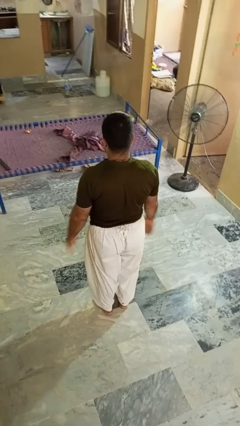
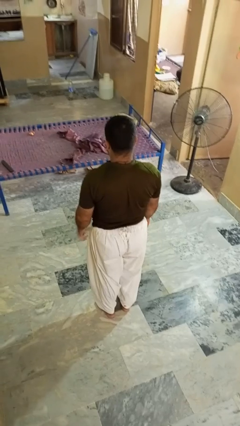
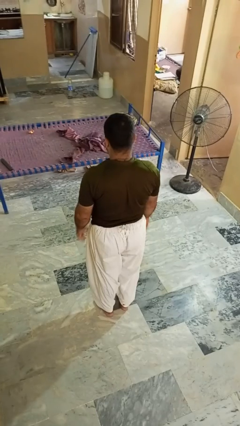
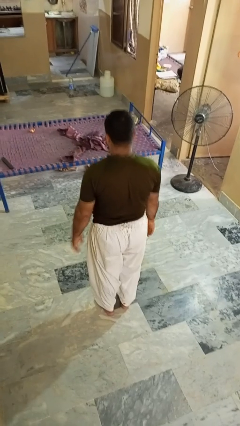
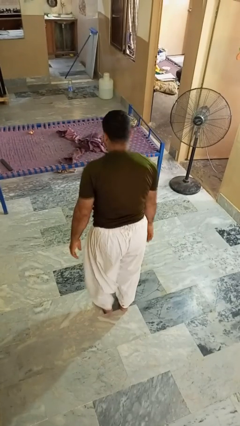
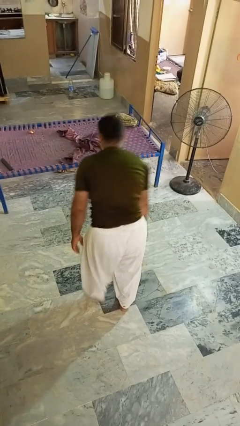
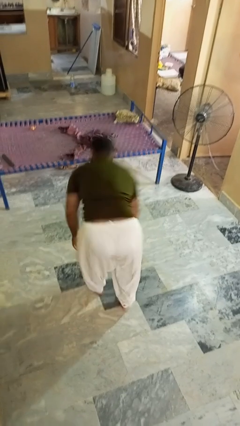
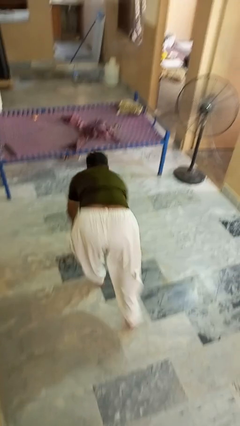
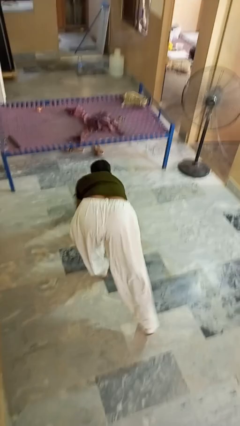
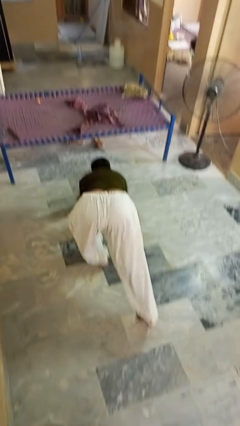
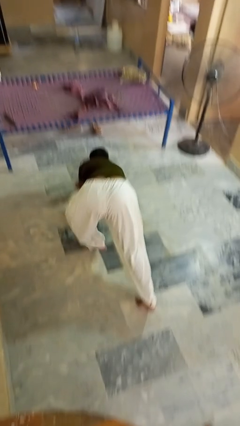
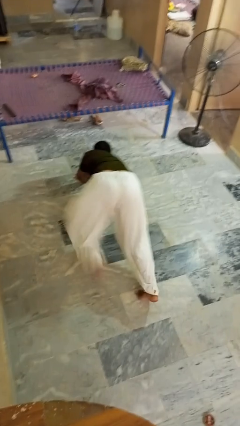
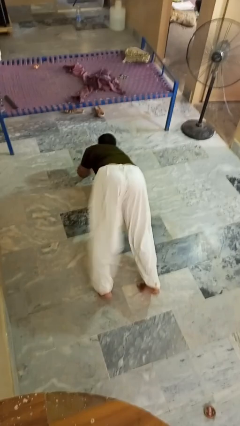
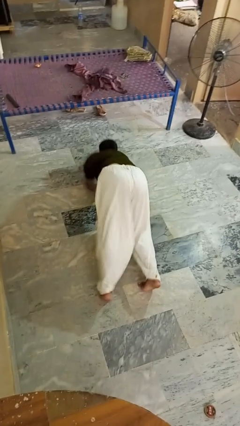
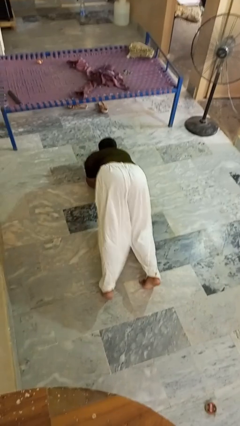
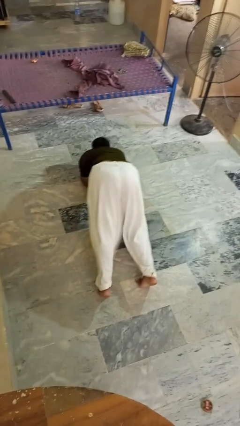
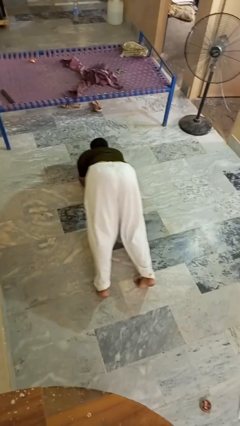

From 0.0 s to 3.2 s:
person exercises with plank

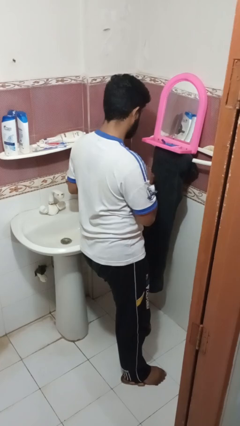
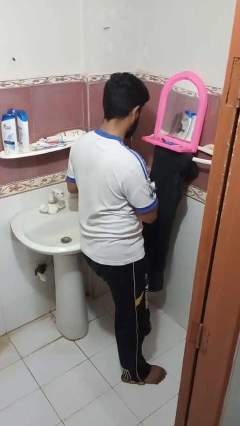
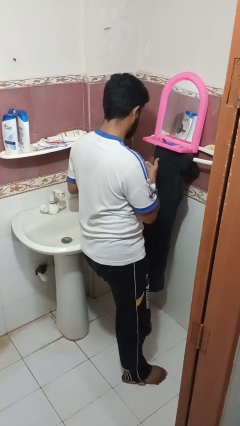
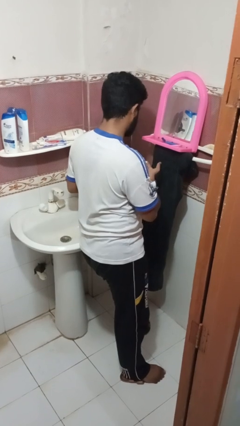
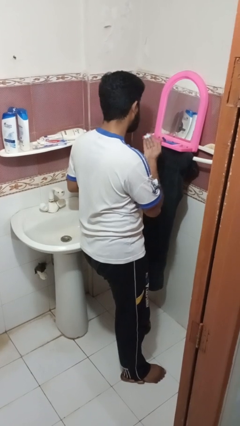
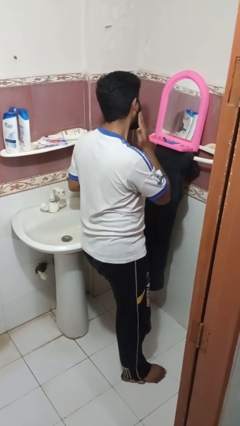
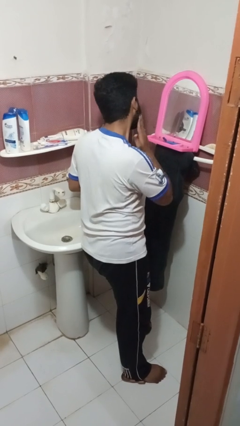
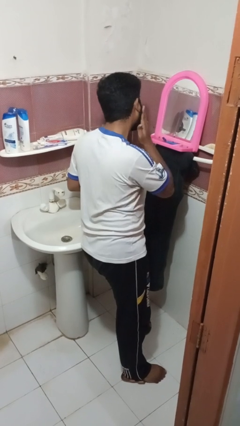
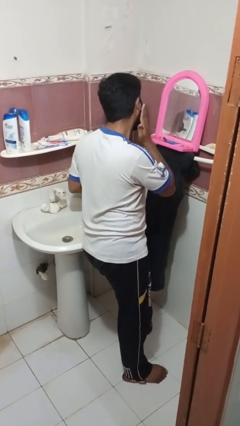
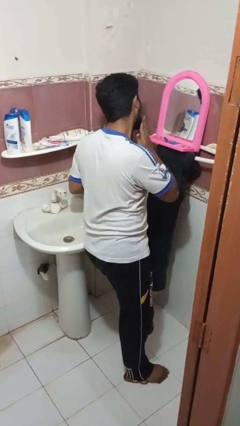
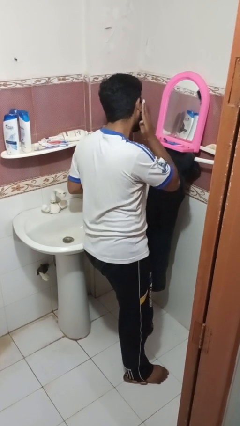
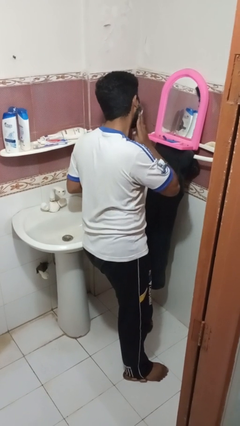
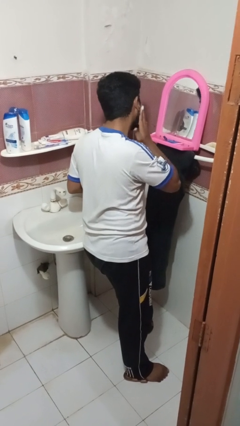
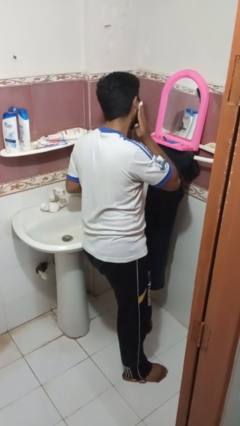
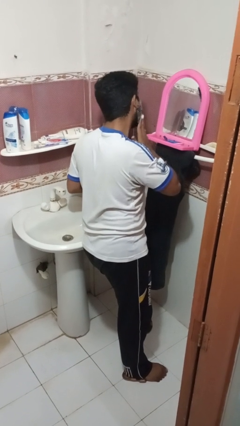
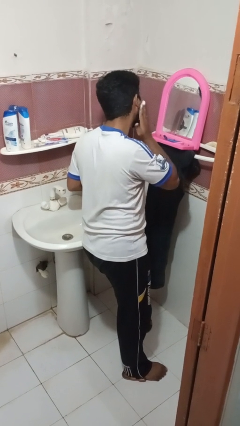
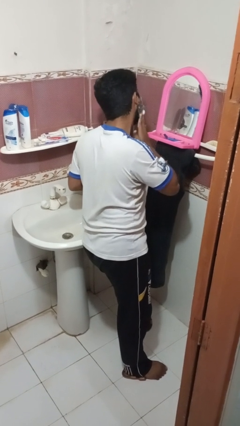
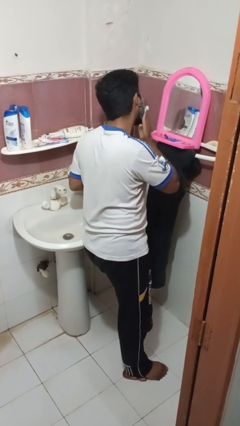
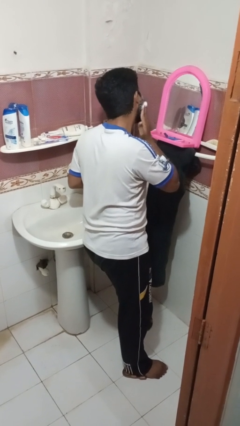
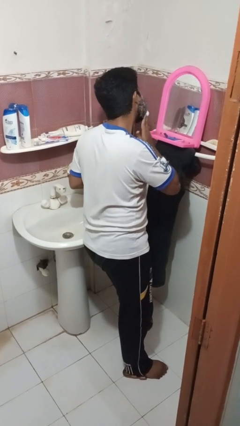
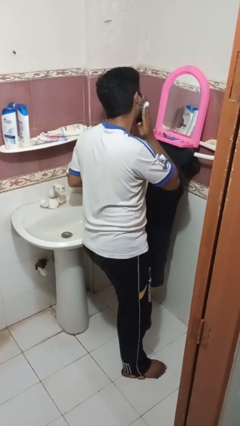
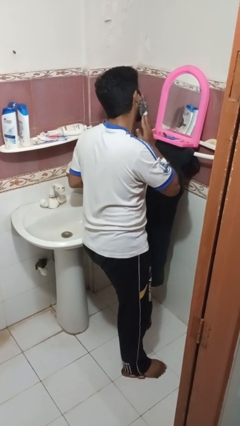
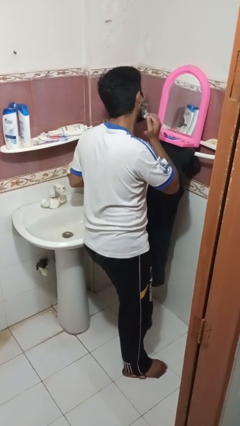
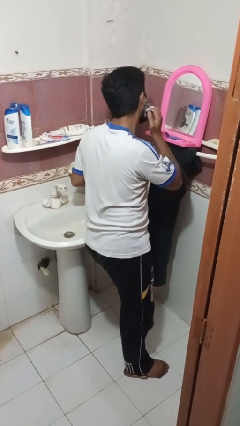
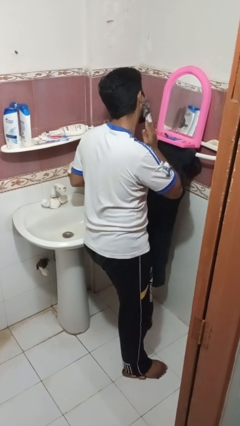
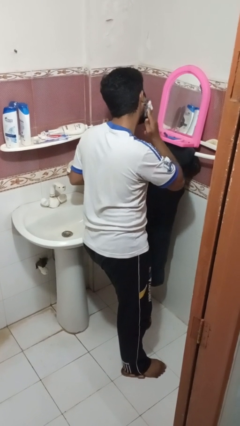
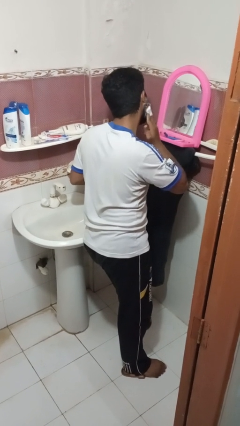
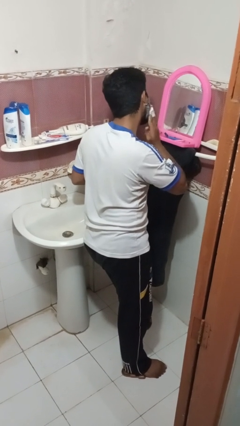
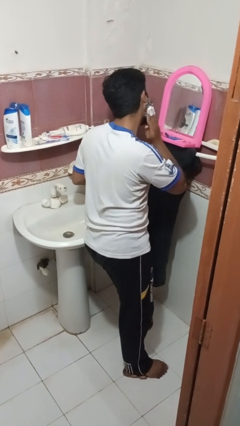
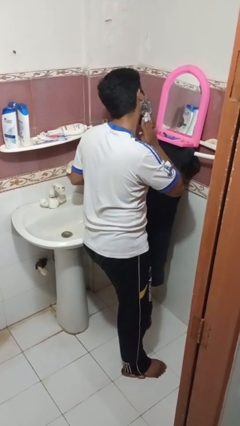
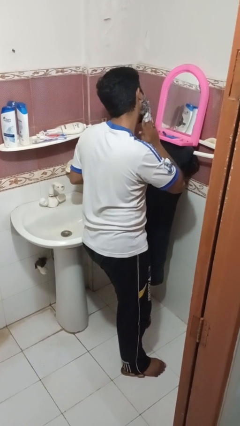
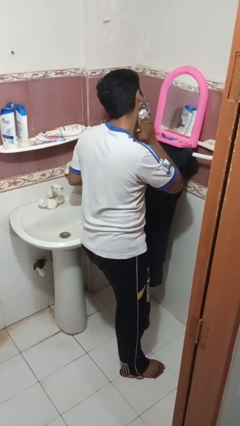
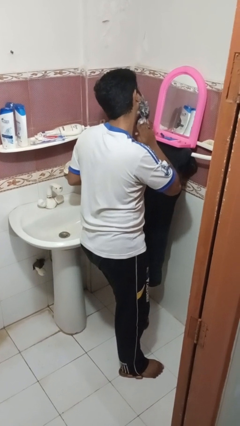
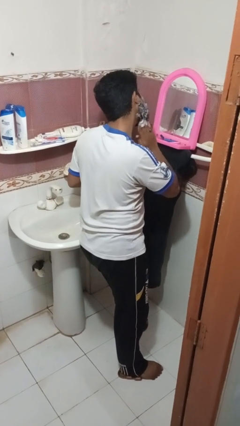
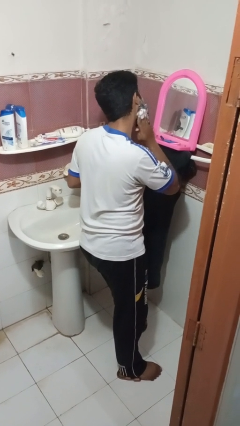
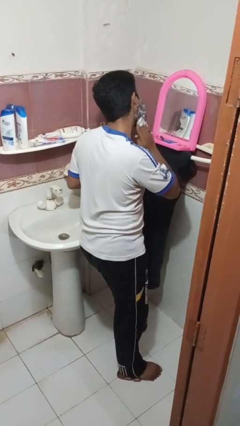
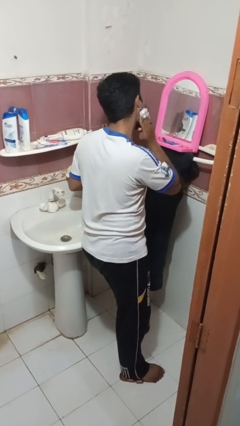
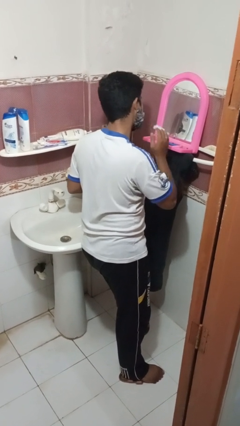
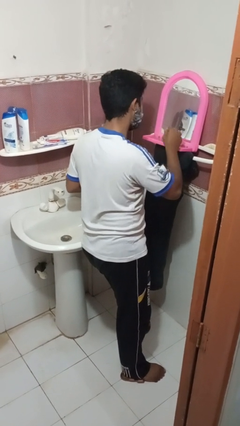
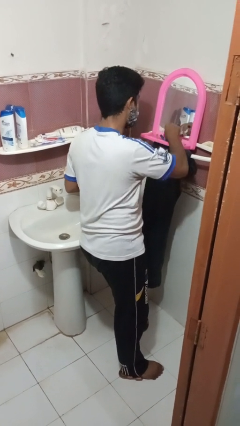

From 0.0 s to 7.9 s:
person applies shaving cream

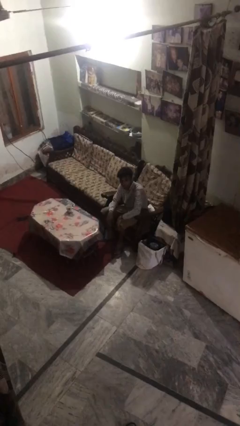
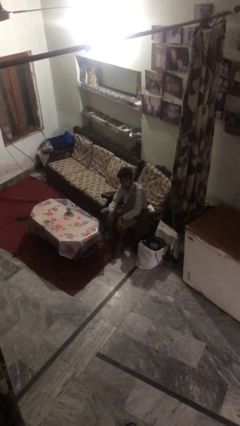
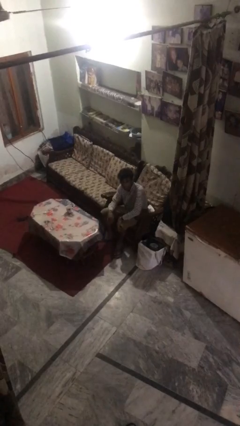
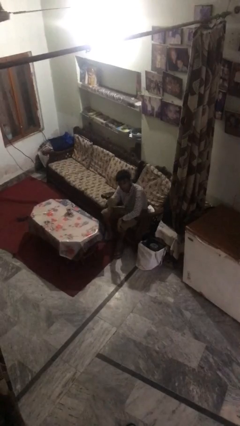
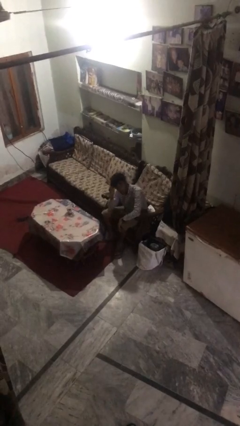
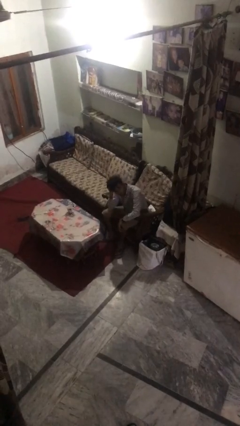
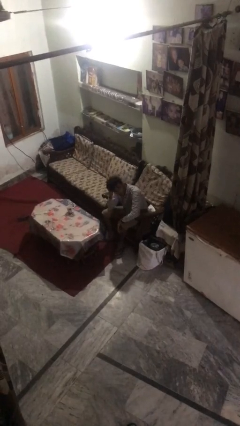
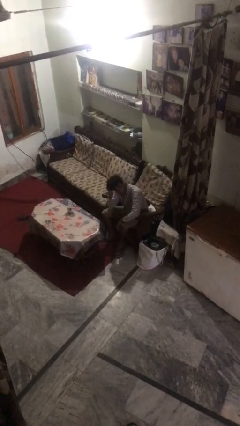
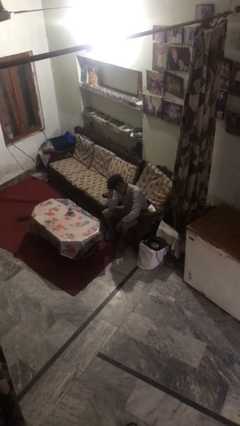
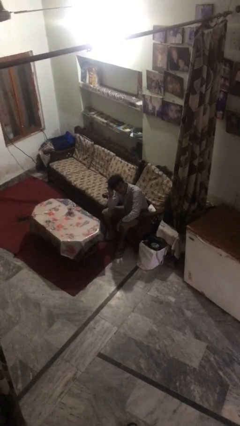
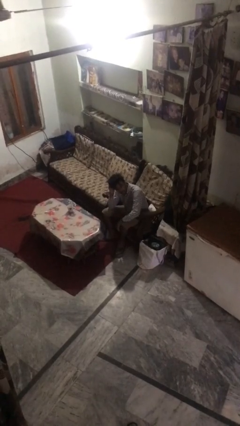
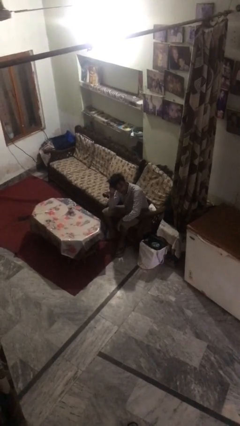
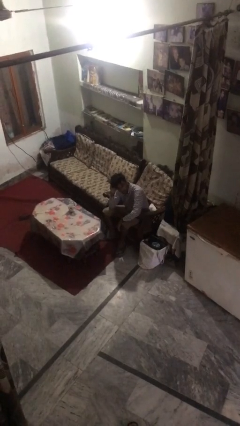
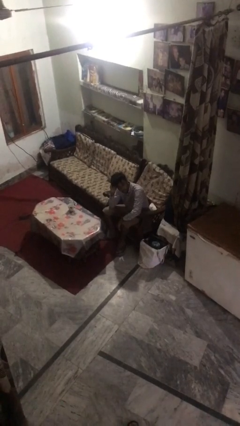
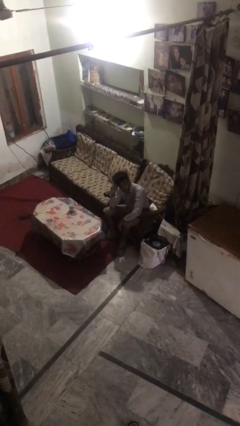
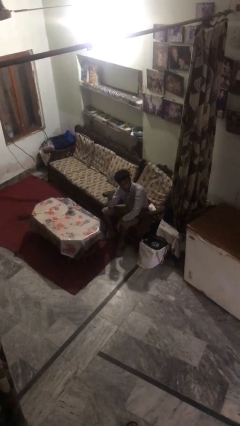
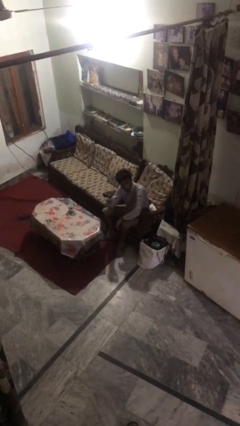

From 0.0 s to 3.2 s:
person strokes hair

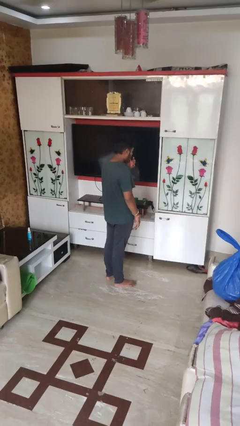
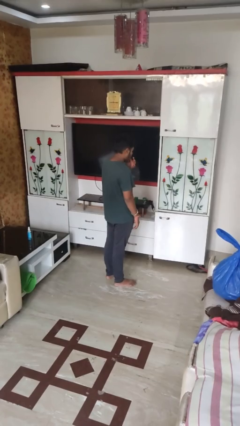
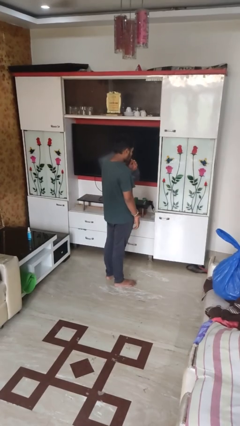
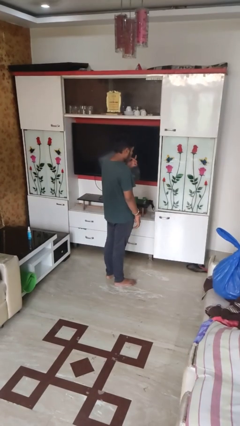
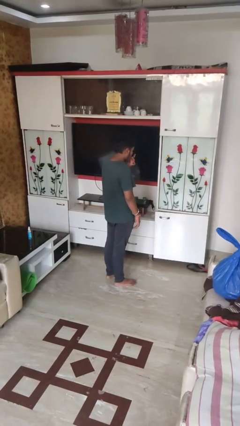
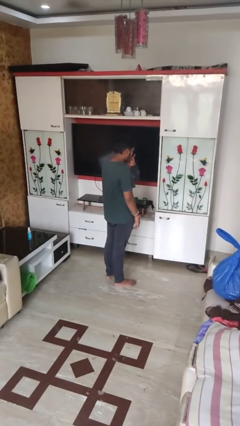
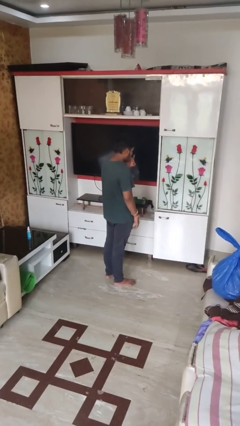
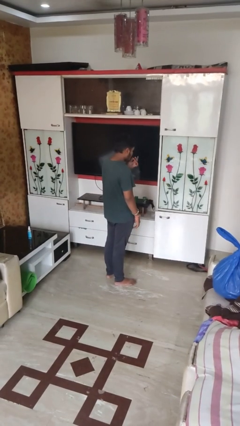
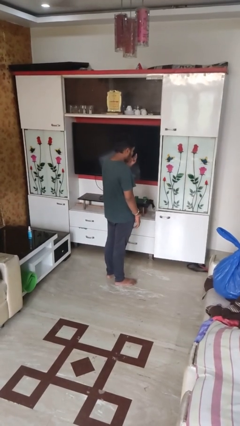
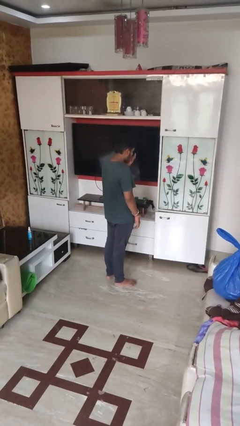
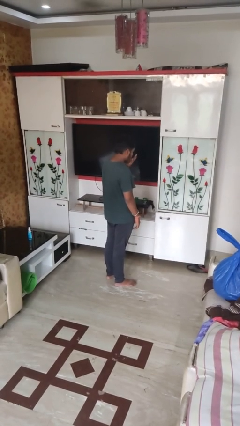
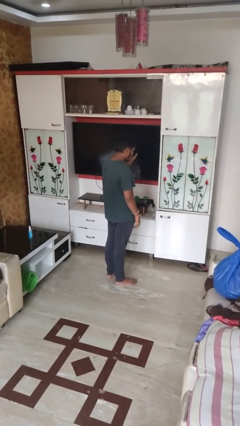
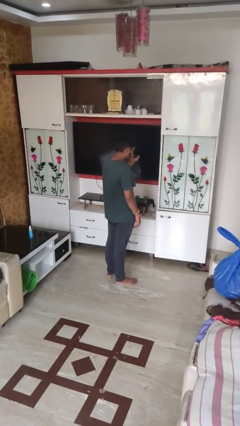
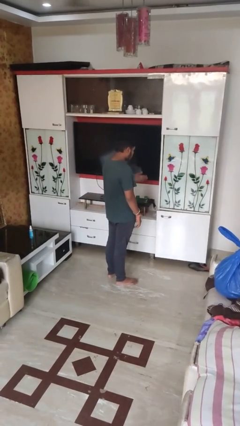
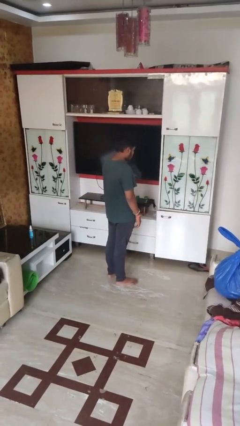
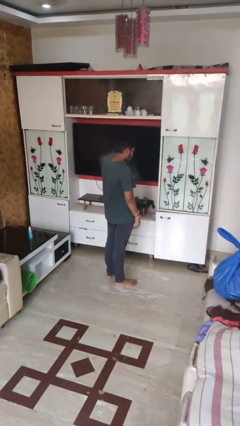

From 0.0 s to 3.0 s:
person licks fingers

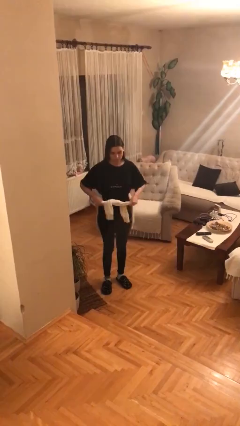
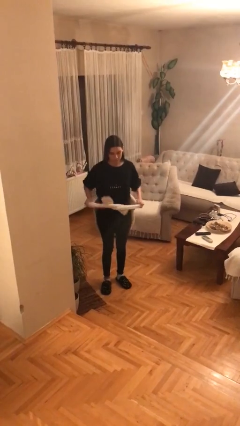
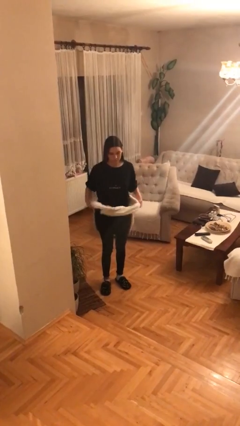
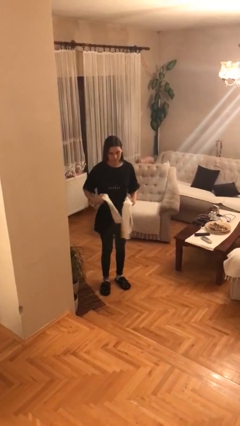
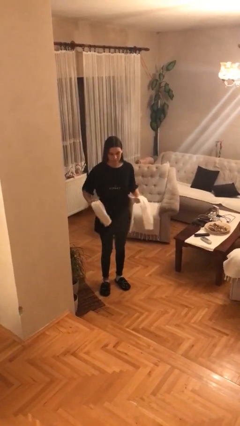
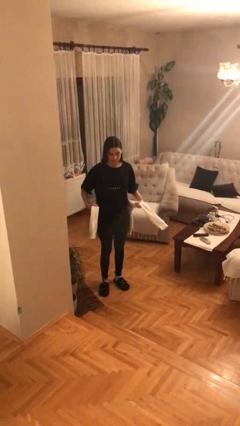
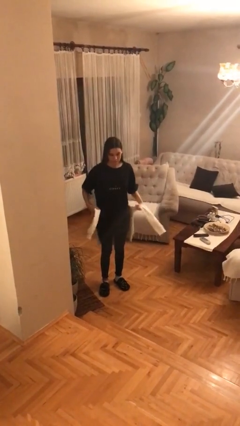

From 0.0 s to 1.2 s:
person unties jacket around waist
